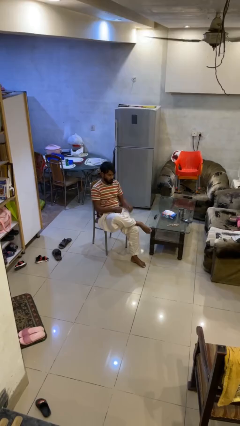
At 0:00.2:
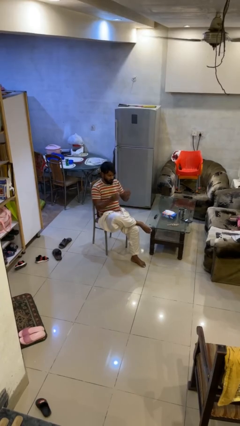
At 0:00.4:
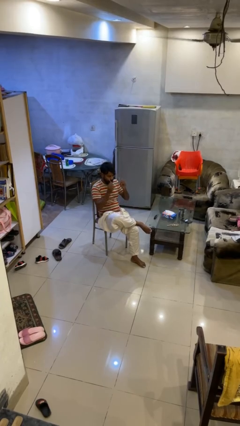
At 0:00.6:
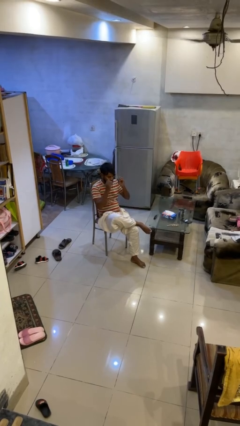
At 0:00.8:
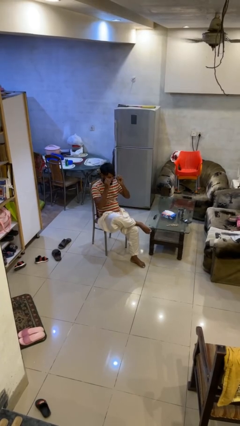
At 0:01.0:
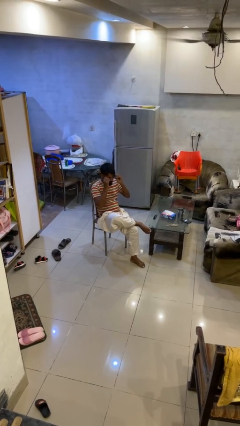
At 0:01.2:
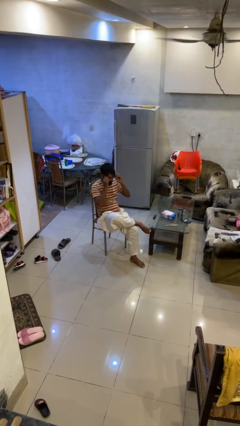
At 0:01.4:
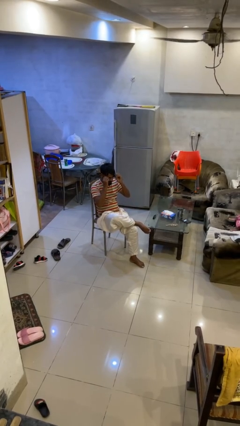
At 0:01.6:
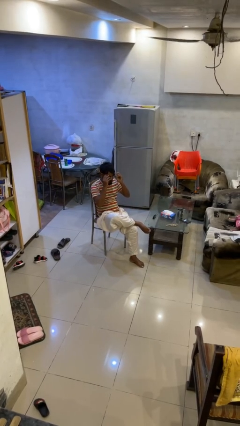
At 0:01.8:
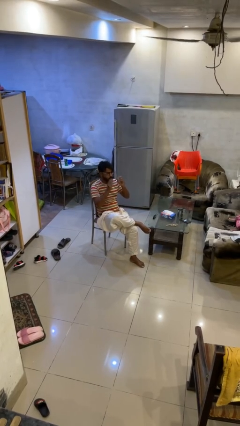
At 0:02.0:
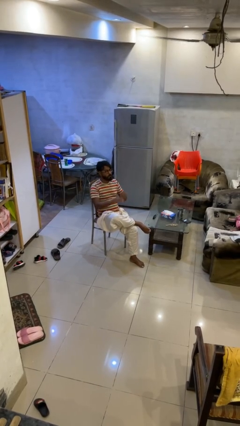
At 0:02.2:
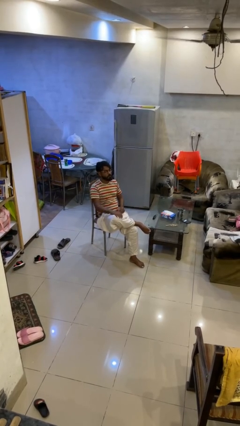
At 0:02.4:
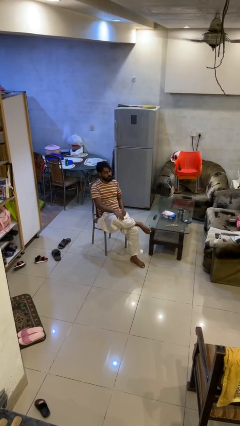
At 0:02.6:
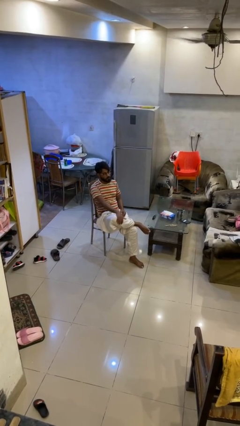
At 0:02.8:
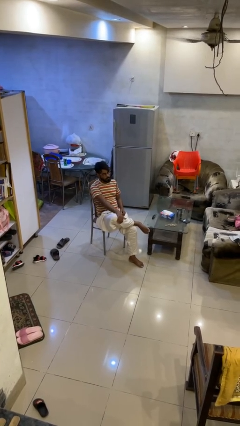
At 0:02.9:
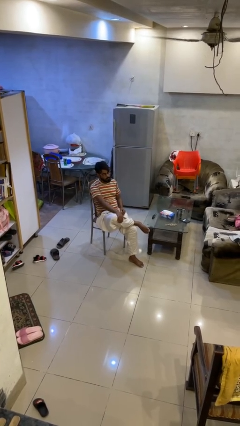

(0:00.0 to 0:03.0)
person puts on glasses

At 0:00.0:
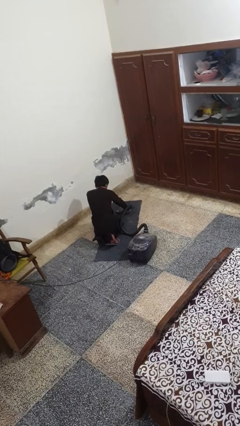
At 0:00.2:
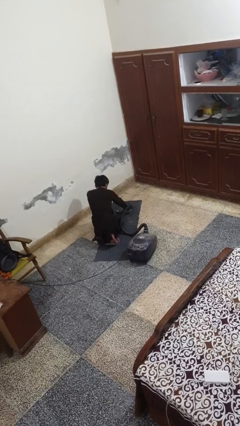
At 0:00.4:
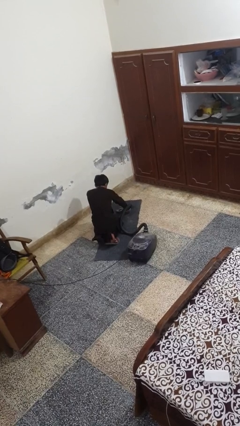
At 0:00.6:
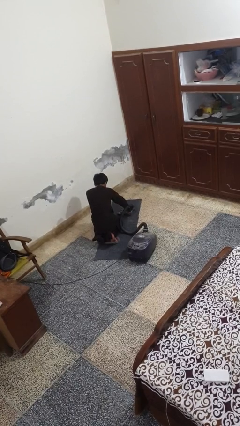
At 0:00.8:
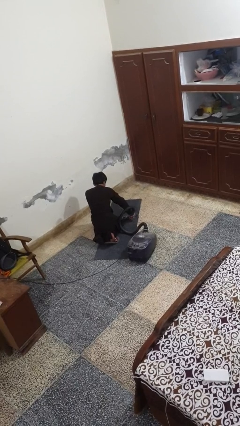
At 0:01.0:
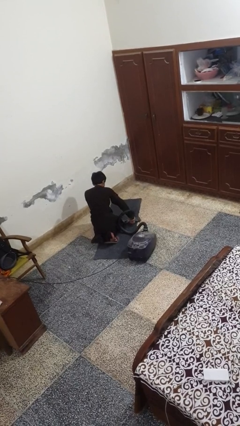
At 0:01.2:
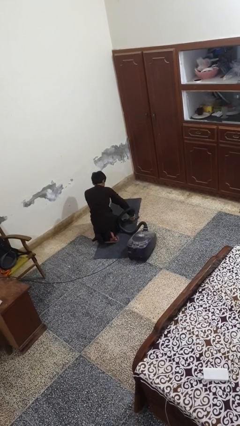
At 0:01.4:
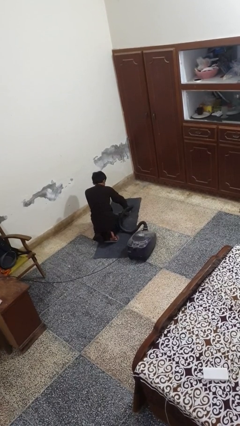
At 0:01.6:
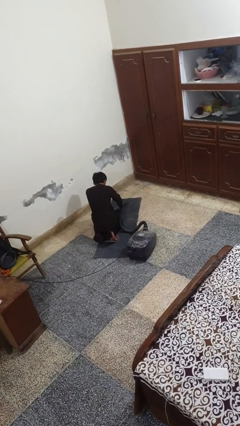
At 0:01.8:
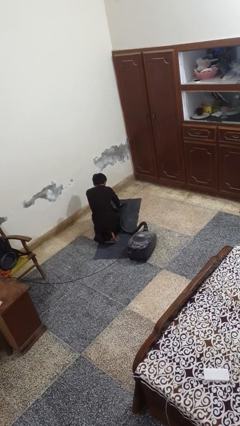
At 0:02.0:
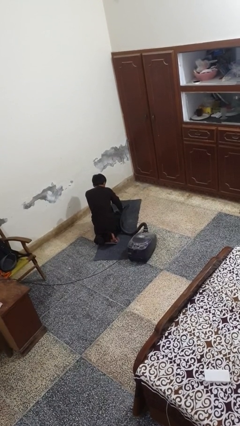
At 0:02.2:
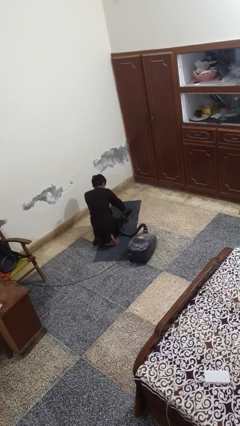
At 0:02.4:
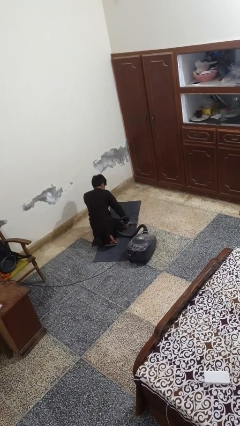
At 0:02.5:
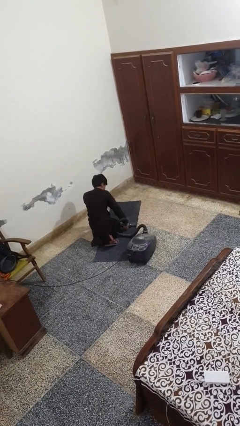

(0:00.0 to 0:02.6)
person vacuums carpet

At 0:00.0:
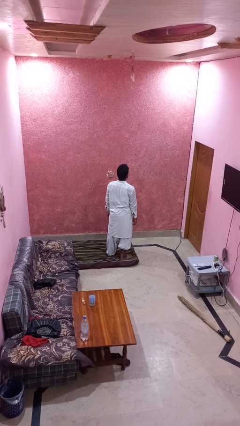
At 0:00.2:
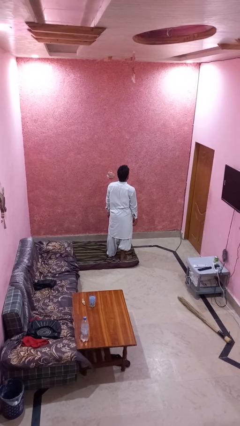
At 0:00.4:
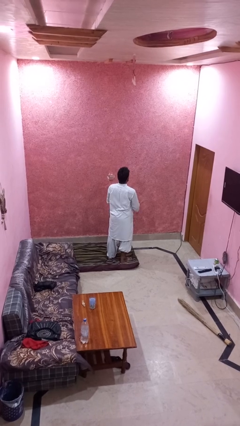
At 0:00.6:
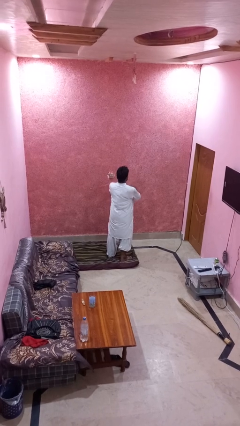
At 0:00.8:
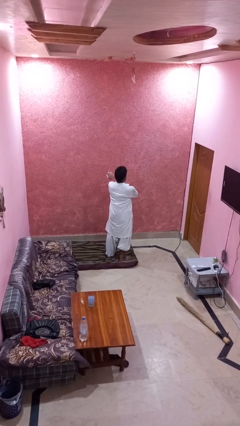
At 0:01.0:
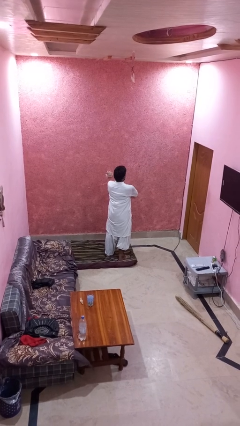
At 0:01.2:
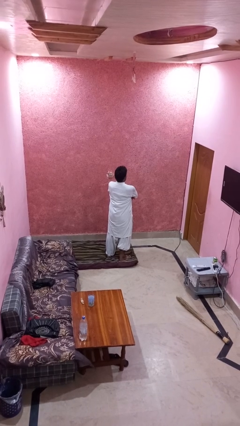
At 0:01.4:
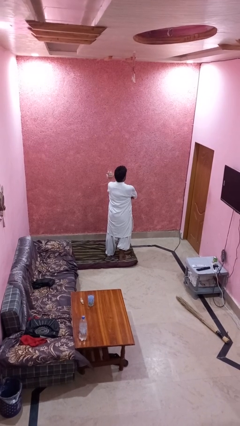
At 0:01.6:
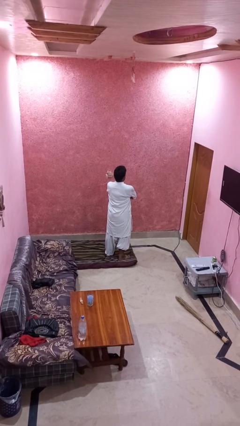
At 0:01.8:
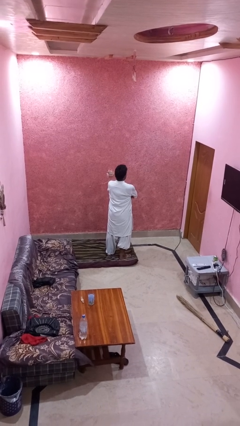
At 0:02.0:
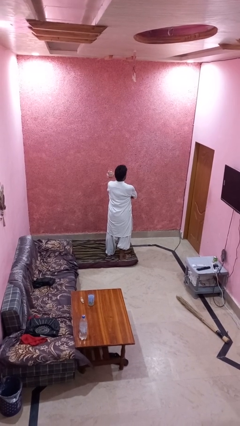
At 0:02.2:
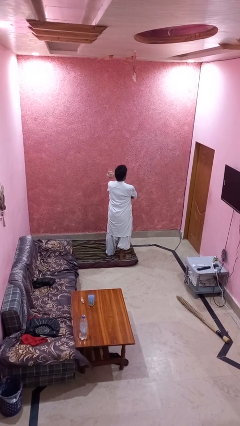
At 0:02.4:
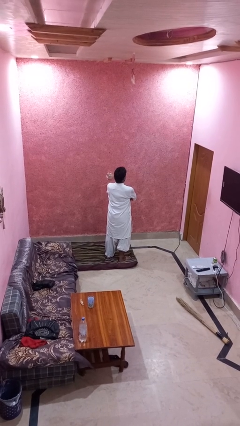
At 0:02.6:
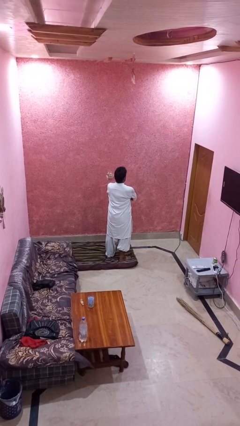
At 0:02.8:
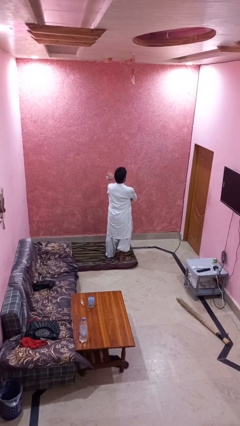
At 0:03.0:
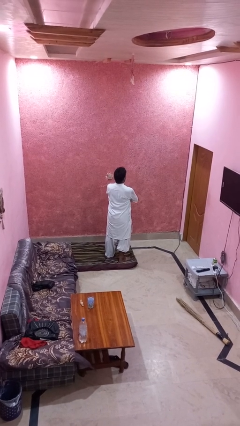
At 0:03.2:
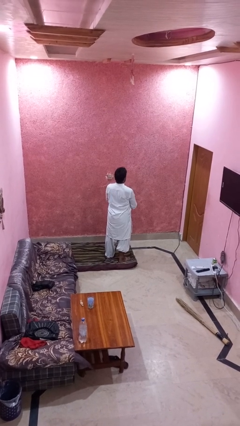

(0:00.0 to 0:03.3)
person crosses arms

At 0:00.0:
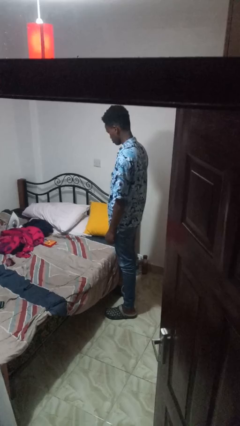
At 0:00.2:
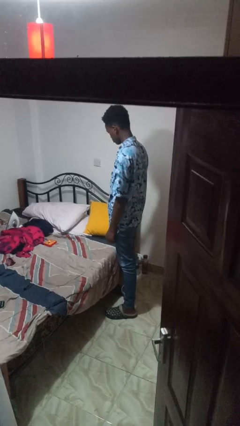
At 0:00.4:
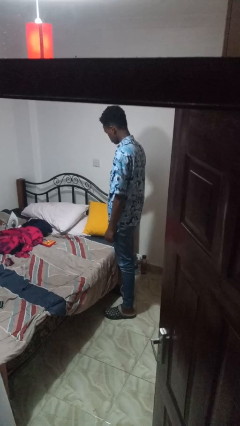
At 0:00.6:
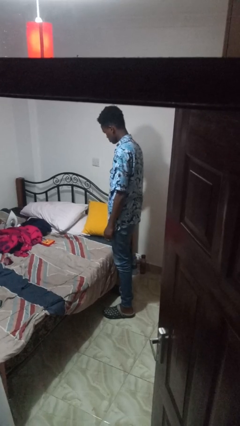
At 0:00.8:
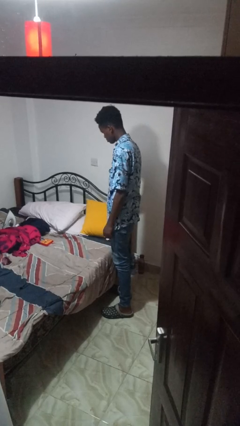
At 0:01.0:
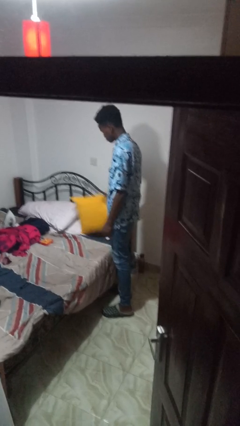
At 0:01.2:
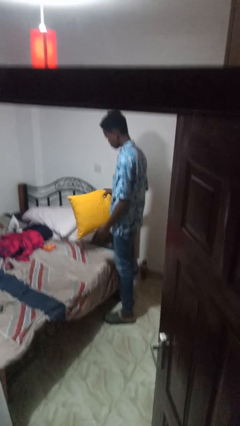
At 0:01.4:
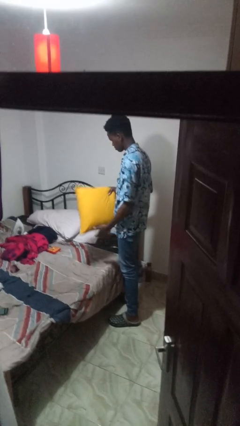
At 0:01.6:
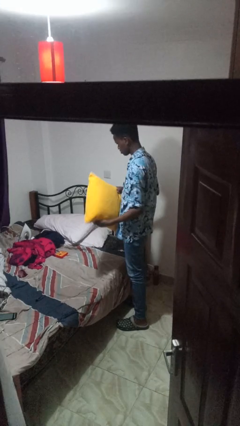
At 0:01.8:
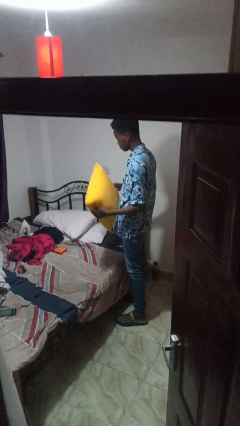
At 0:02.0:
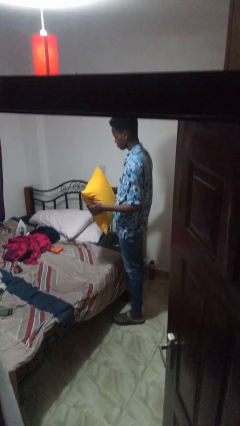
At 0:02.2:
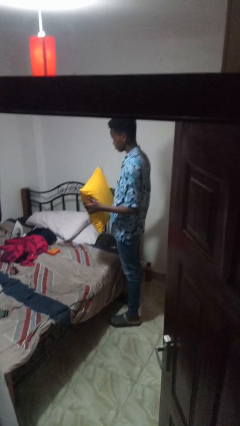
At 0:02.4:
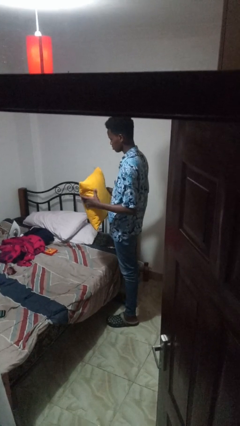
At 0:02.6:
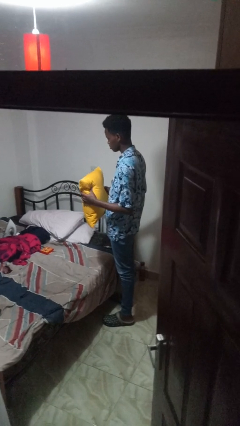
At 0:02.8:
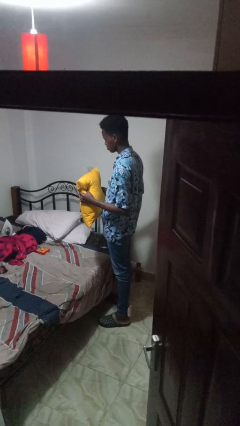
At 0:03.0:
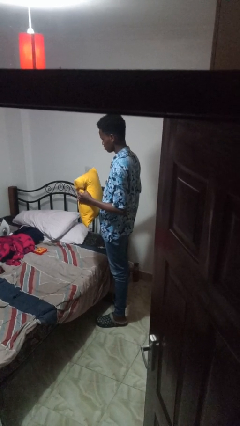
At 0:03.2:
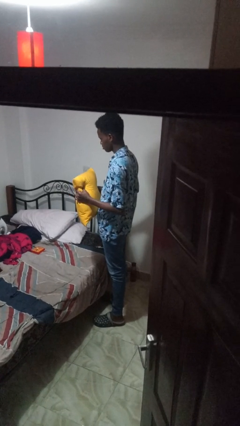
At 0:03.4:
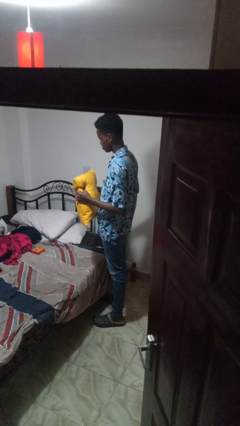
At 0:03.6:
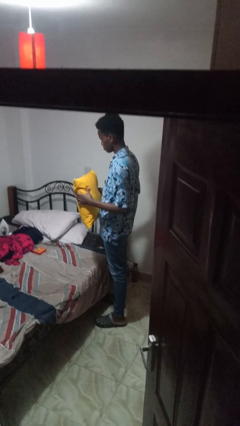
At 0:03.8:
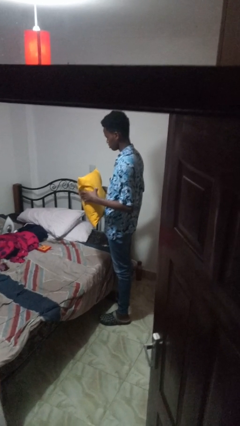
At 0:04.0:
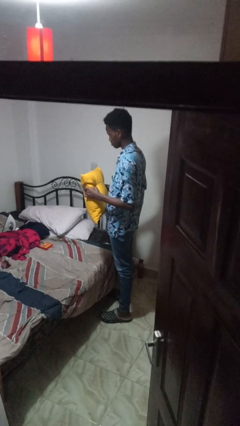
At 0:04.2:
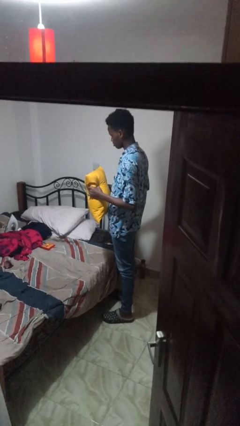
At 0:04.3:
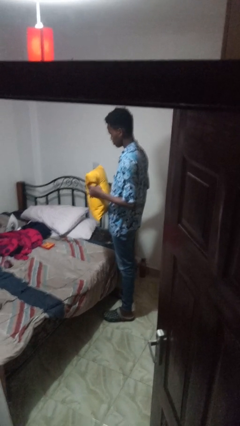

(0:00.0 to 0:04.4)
person picks up object from bed

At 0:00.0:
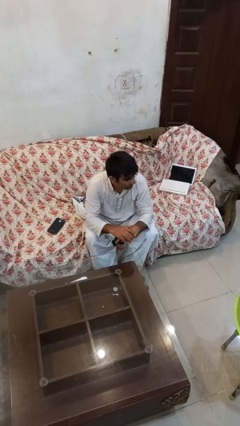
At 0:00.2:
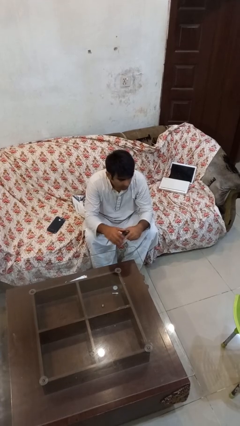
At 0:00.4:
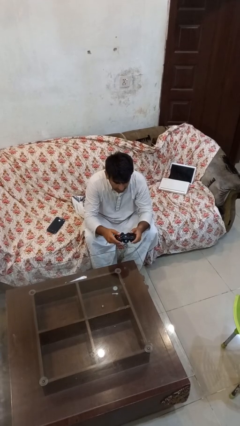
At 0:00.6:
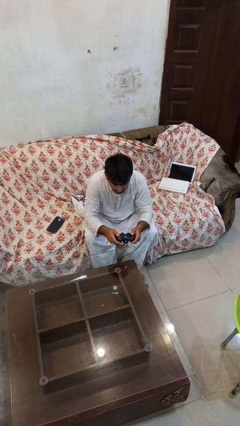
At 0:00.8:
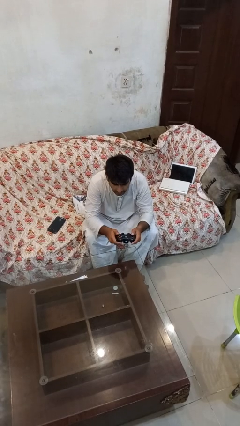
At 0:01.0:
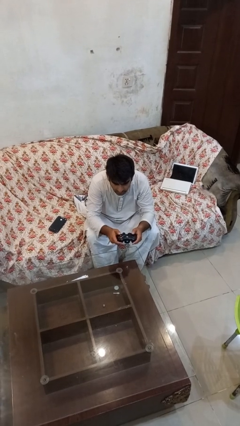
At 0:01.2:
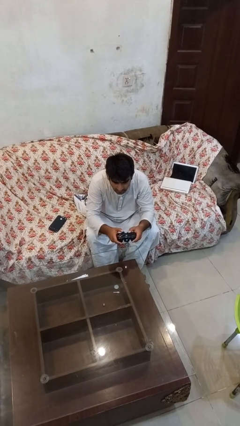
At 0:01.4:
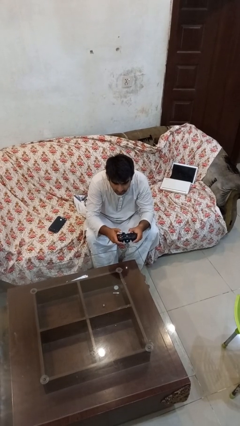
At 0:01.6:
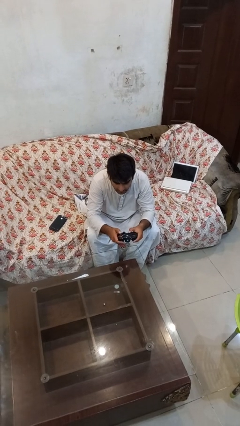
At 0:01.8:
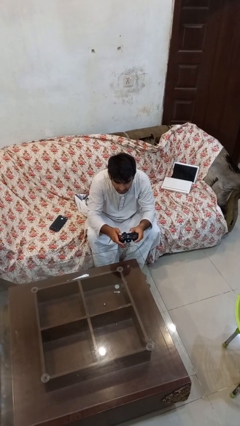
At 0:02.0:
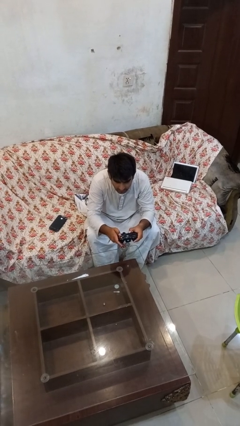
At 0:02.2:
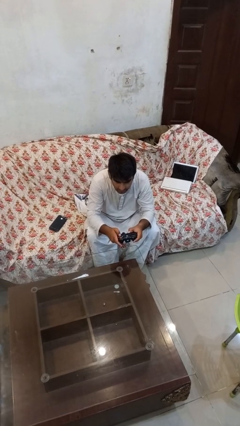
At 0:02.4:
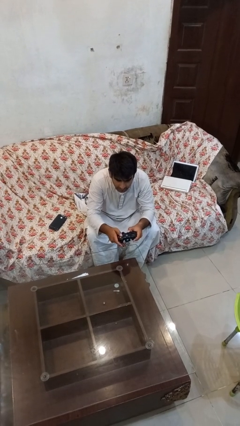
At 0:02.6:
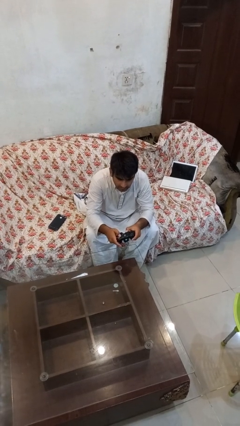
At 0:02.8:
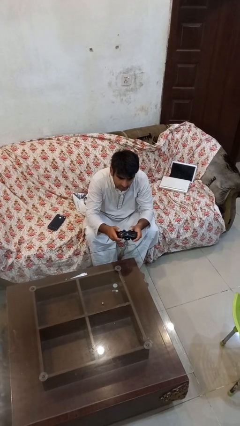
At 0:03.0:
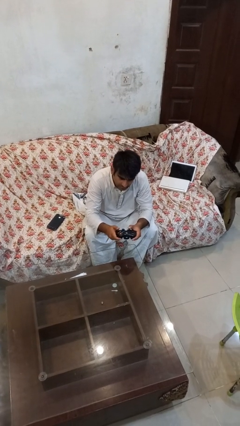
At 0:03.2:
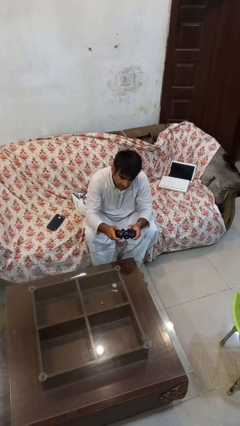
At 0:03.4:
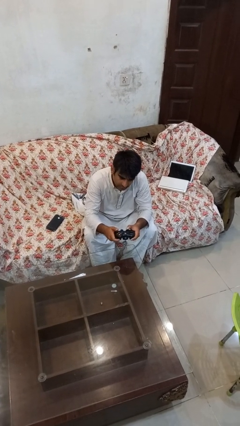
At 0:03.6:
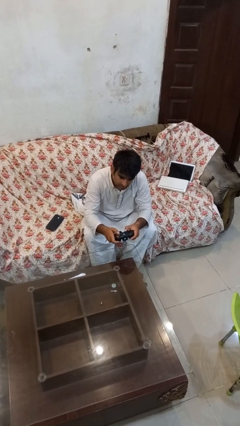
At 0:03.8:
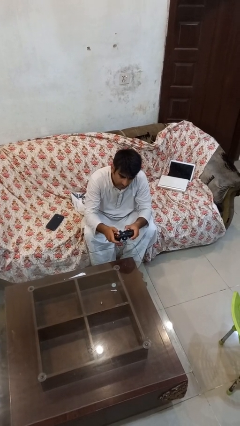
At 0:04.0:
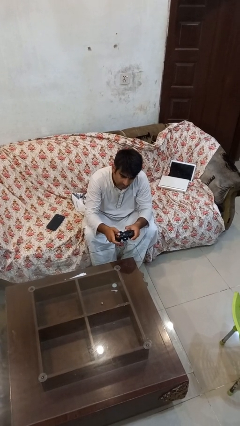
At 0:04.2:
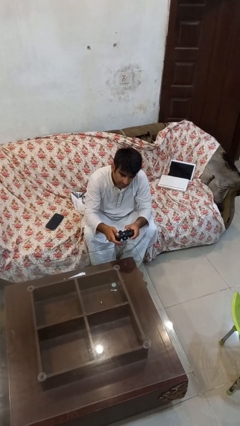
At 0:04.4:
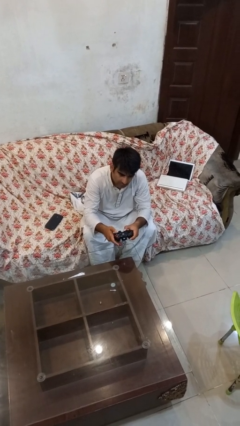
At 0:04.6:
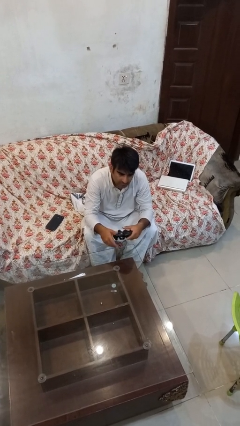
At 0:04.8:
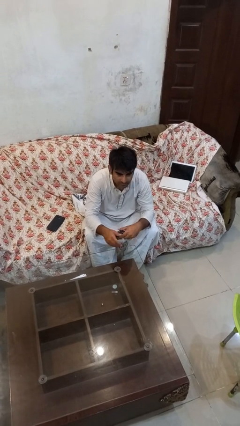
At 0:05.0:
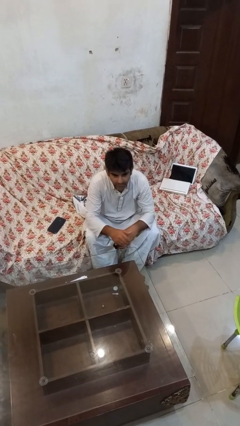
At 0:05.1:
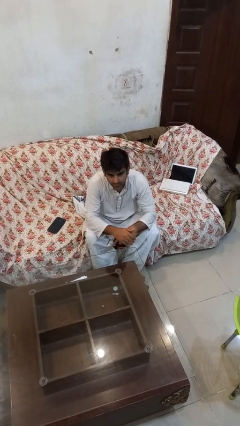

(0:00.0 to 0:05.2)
person interacts with handheld game
